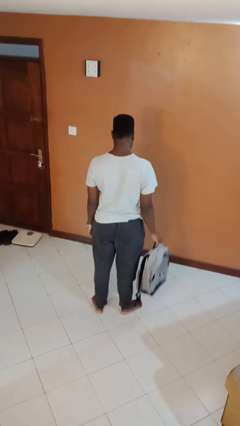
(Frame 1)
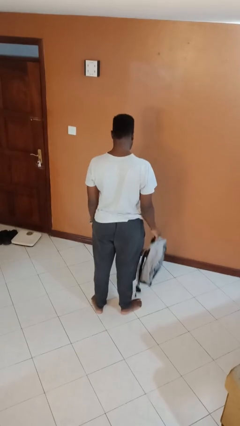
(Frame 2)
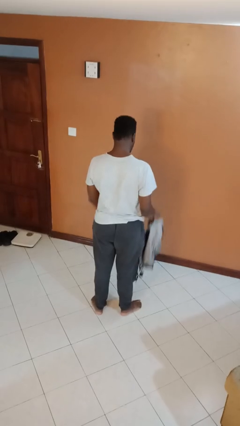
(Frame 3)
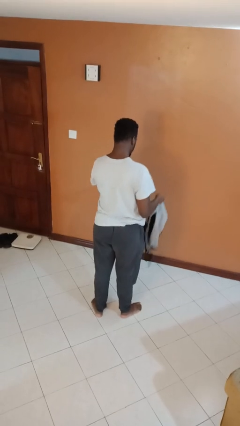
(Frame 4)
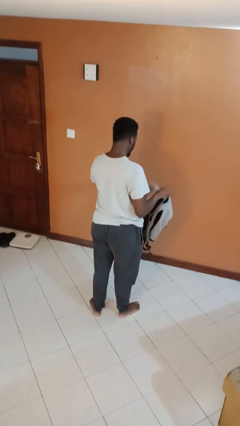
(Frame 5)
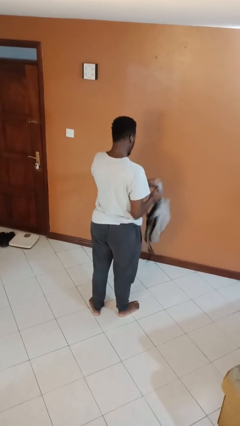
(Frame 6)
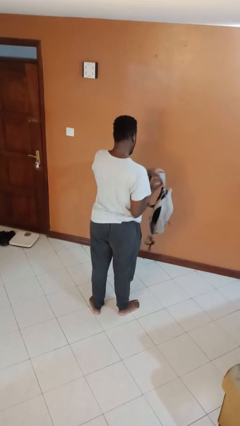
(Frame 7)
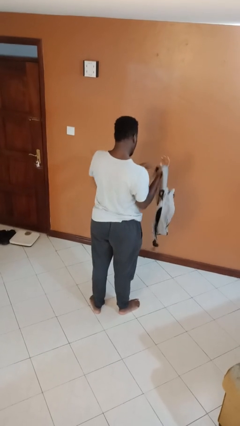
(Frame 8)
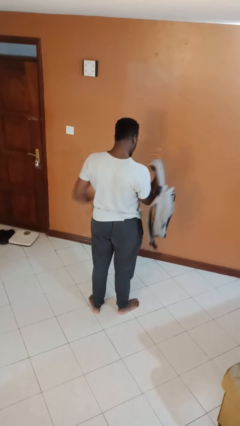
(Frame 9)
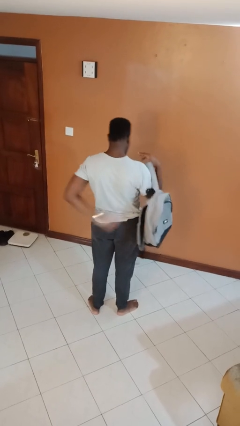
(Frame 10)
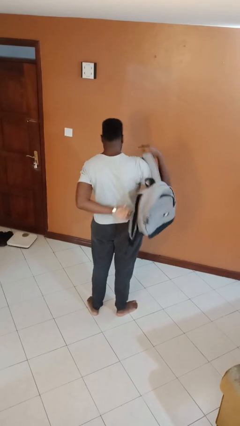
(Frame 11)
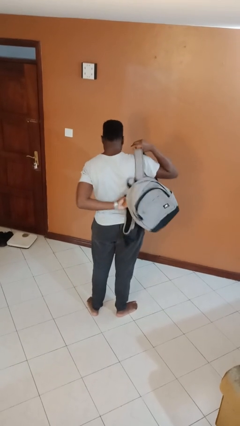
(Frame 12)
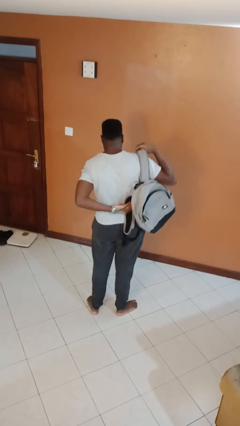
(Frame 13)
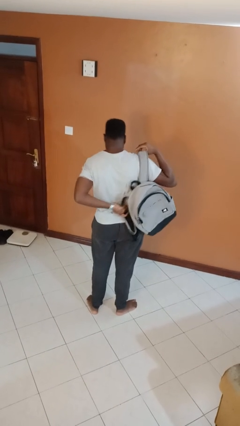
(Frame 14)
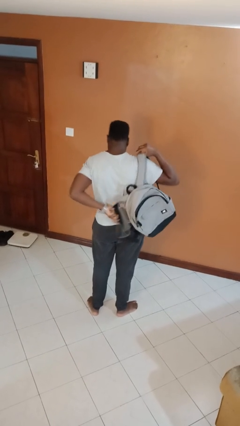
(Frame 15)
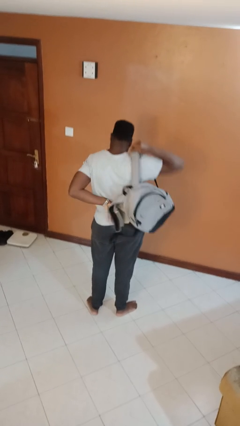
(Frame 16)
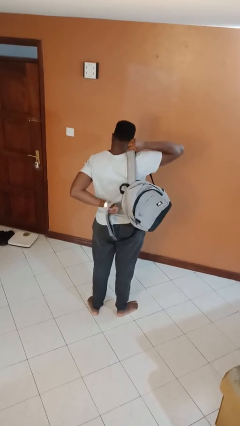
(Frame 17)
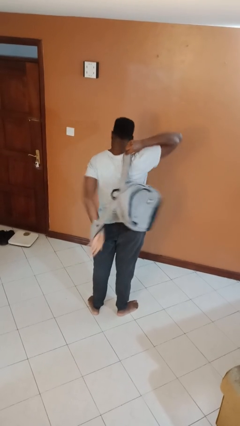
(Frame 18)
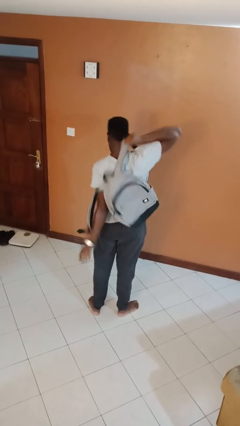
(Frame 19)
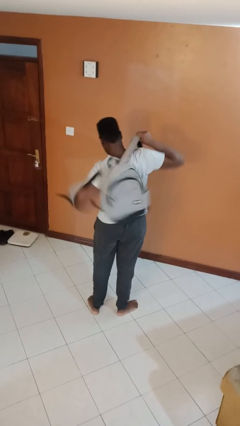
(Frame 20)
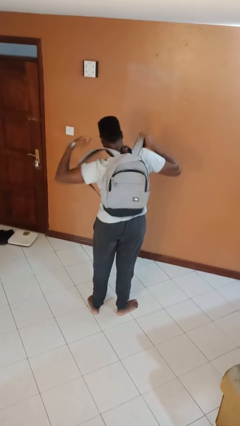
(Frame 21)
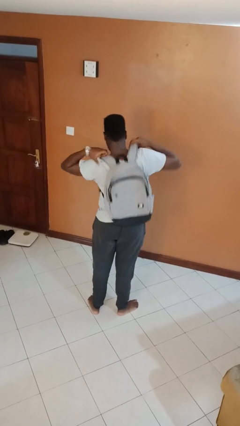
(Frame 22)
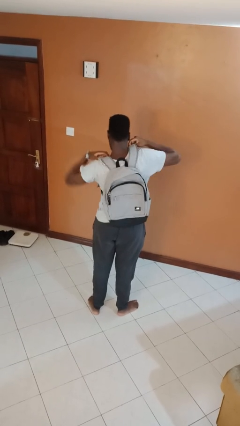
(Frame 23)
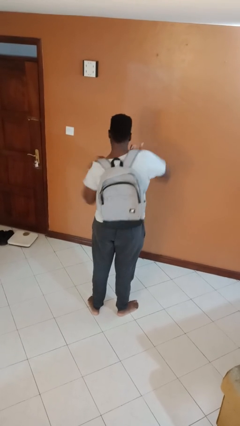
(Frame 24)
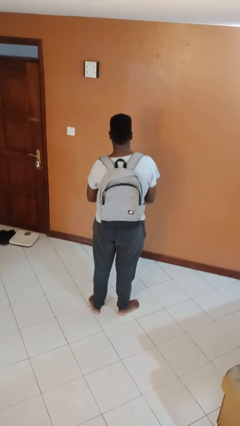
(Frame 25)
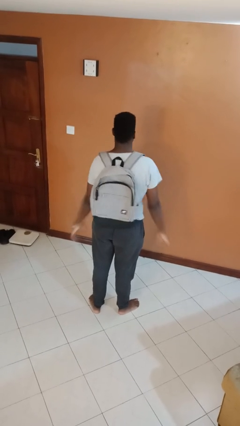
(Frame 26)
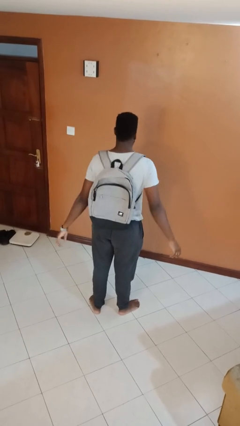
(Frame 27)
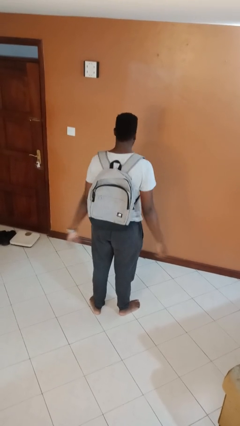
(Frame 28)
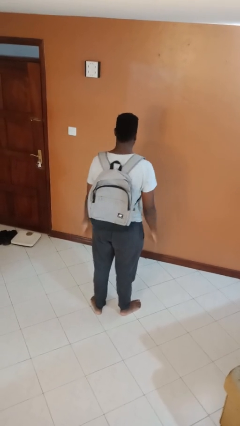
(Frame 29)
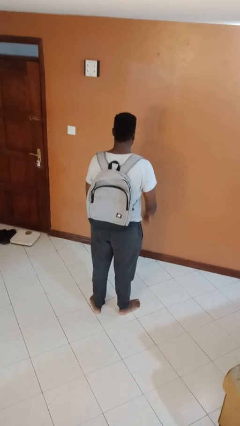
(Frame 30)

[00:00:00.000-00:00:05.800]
person puts on backpack

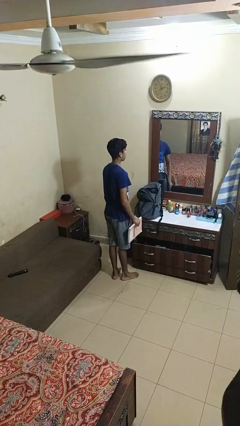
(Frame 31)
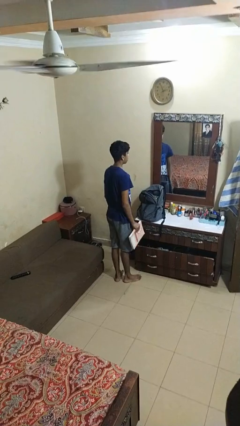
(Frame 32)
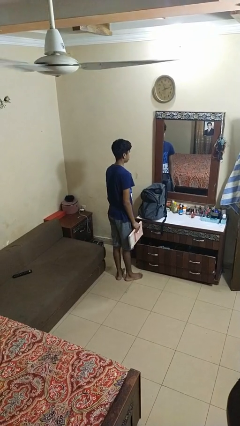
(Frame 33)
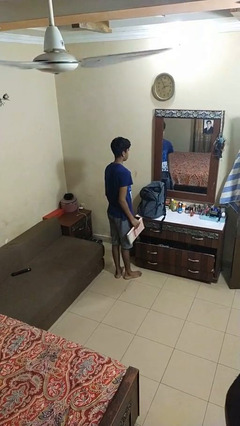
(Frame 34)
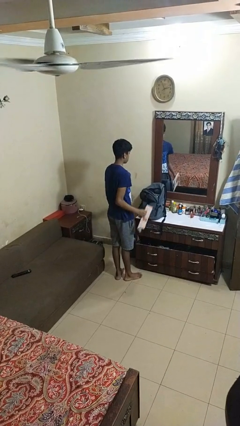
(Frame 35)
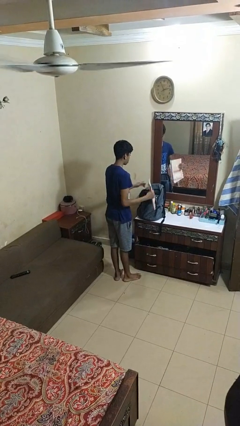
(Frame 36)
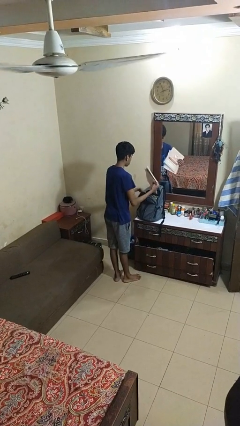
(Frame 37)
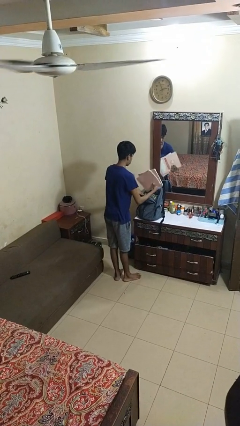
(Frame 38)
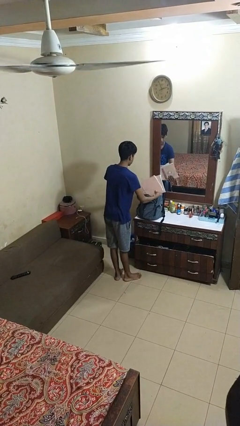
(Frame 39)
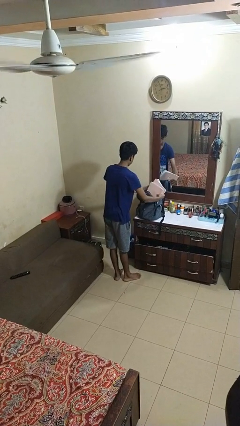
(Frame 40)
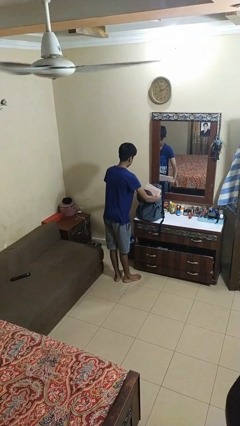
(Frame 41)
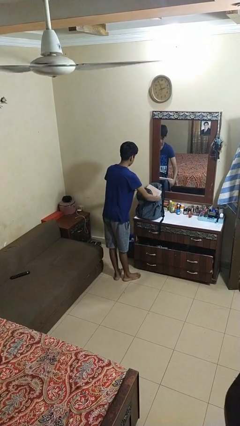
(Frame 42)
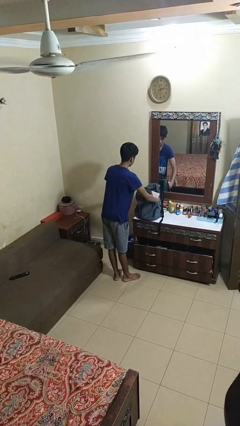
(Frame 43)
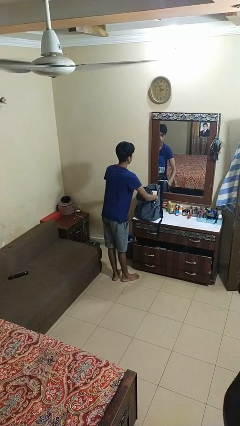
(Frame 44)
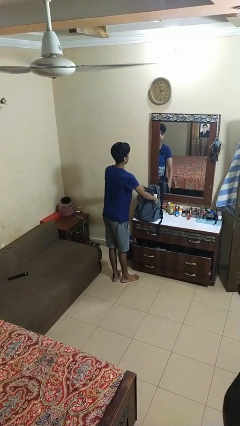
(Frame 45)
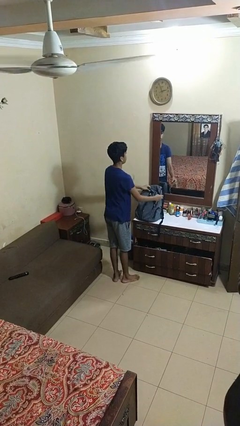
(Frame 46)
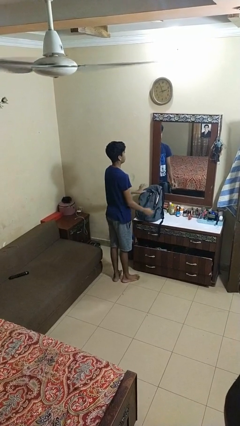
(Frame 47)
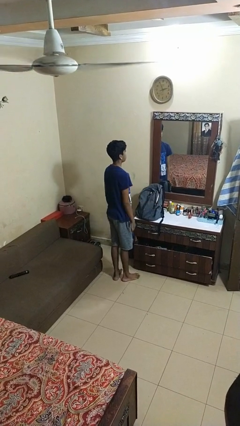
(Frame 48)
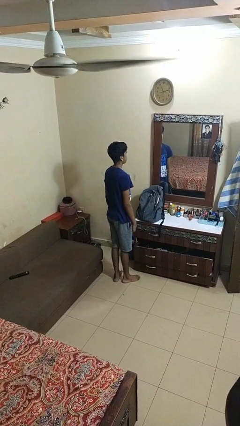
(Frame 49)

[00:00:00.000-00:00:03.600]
person puts object into bag

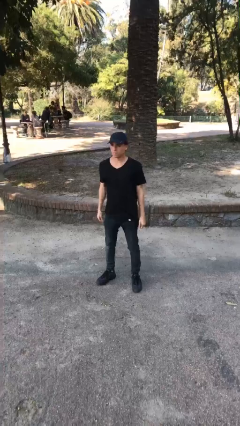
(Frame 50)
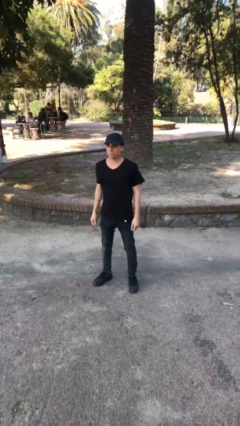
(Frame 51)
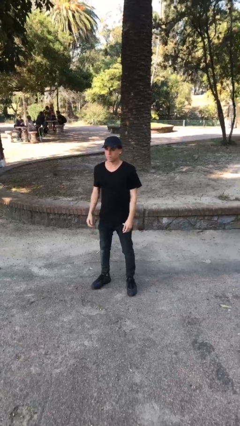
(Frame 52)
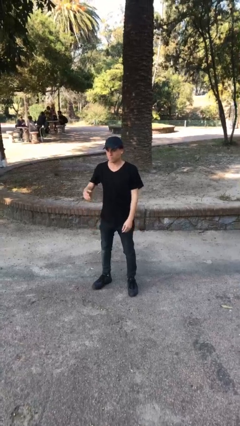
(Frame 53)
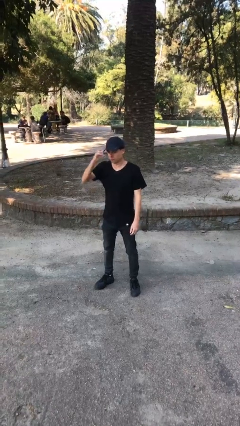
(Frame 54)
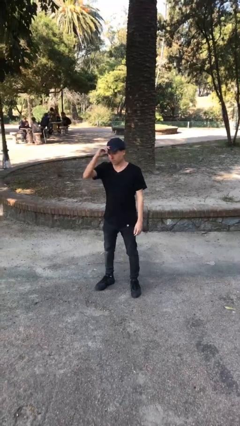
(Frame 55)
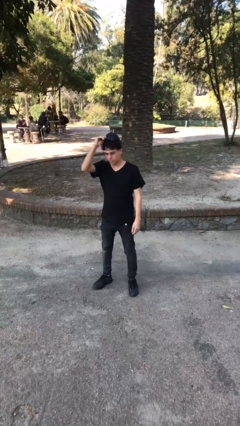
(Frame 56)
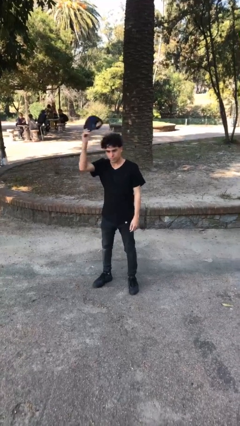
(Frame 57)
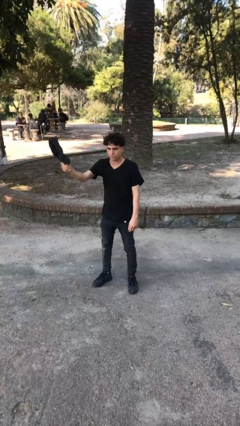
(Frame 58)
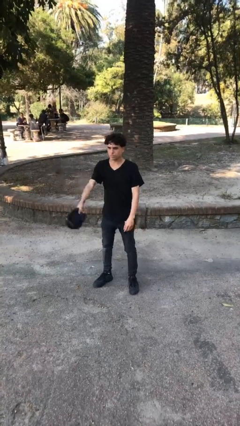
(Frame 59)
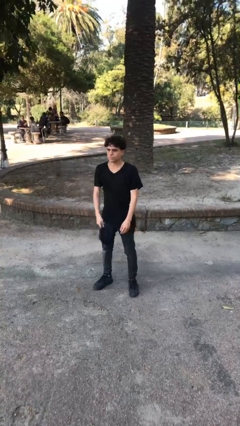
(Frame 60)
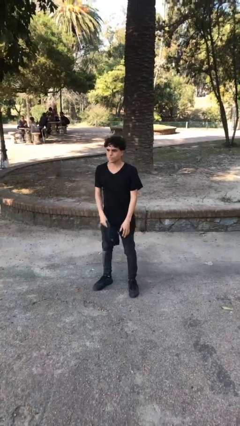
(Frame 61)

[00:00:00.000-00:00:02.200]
person takes off hat

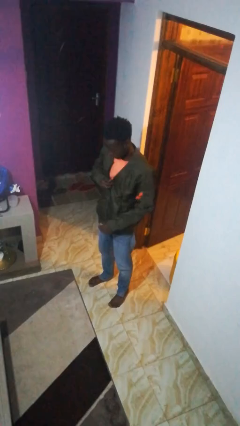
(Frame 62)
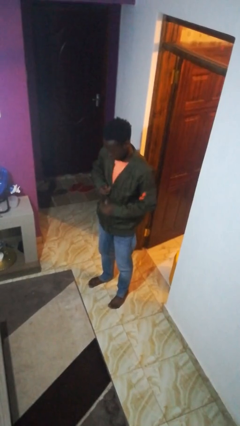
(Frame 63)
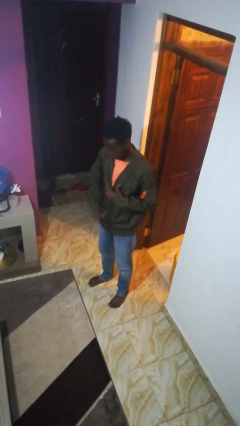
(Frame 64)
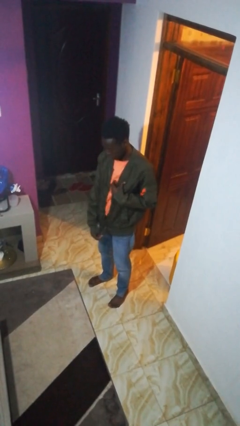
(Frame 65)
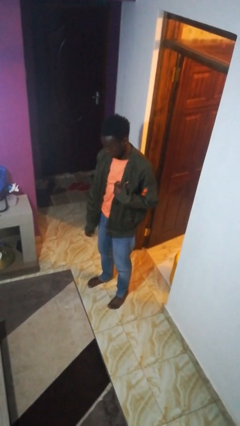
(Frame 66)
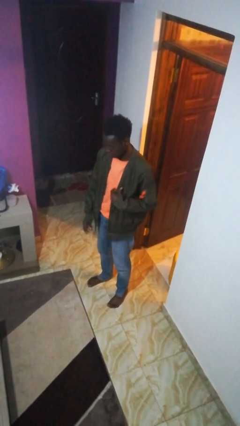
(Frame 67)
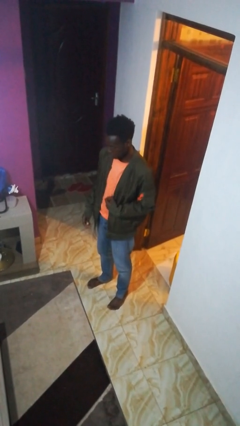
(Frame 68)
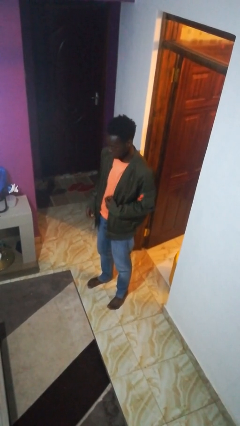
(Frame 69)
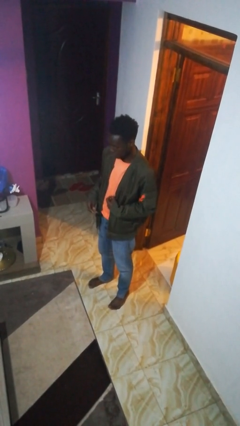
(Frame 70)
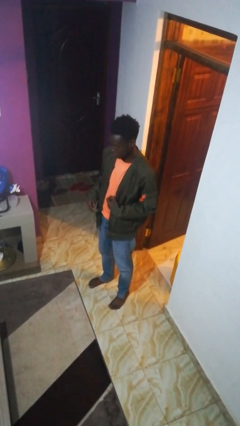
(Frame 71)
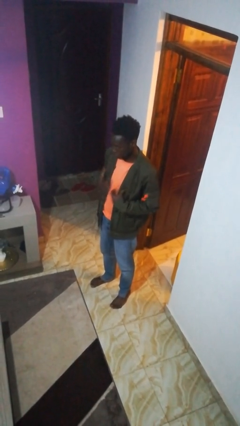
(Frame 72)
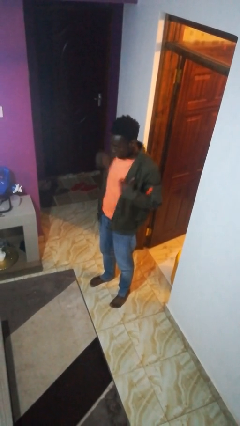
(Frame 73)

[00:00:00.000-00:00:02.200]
person unzips jacket

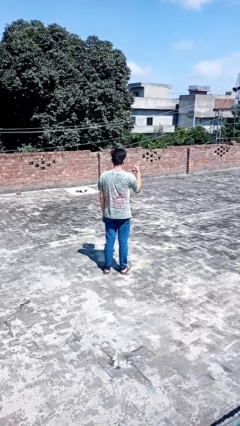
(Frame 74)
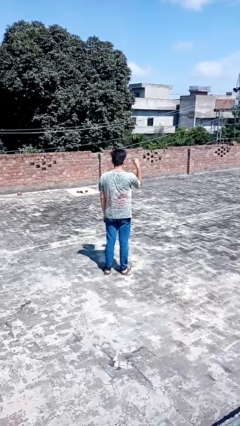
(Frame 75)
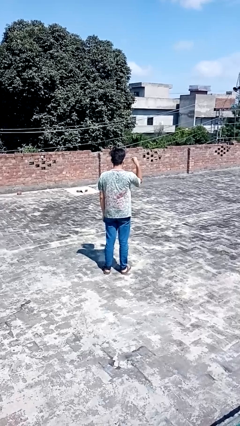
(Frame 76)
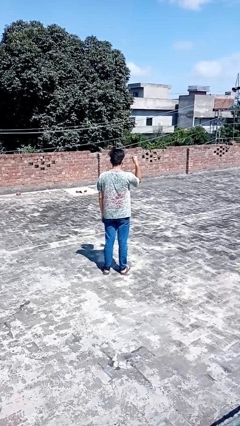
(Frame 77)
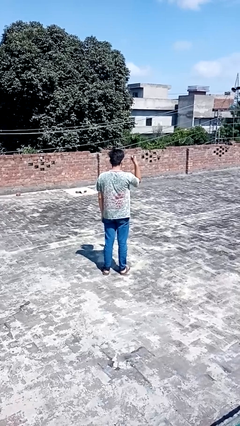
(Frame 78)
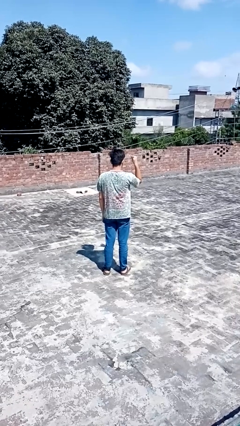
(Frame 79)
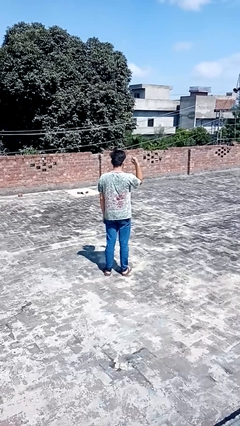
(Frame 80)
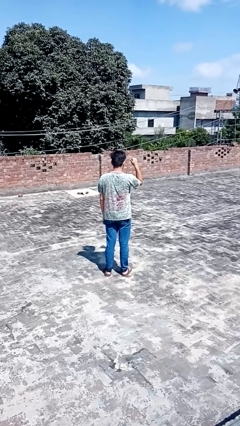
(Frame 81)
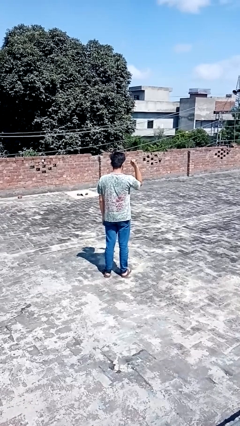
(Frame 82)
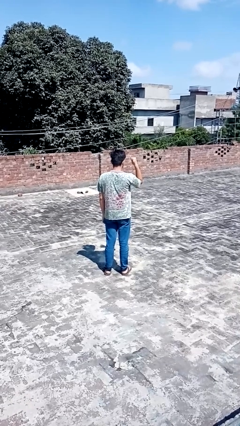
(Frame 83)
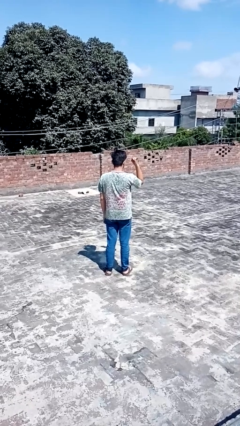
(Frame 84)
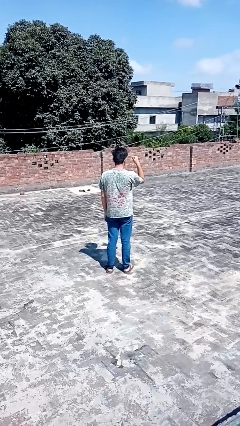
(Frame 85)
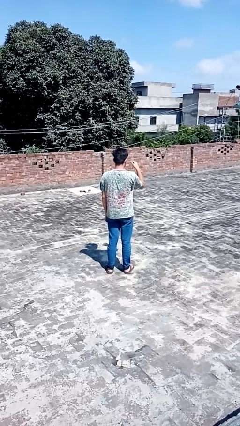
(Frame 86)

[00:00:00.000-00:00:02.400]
person gestures hang loose

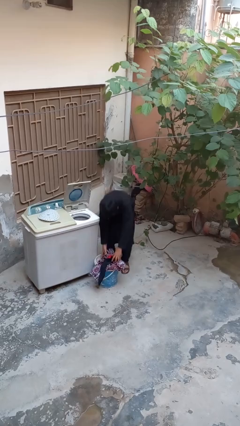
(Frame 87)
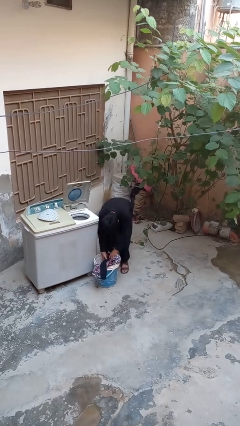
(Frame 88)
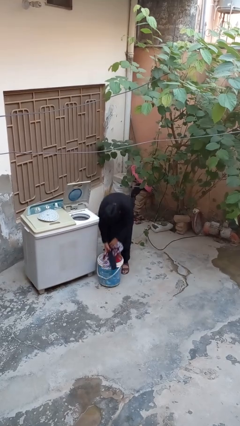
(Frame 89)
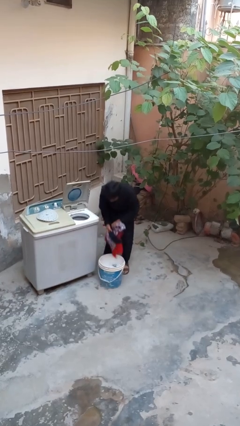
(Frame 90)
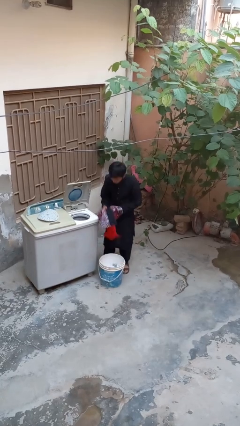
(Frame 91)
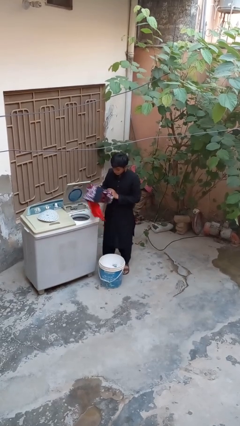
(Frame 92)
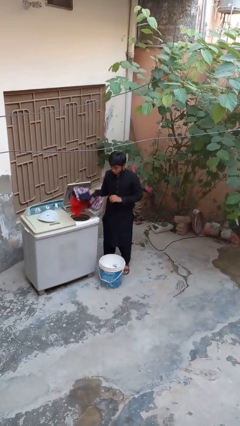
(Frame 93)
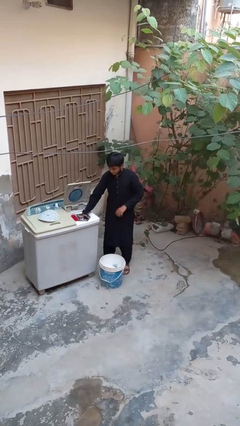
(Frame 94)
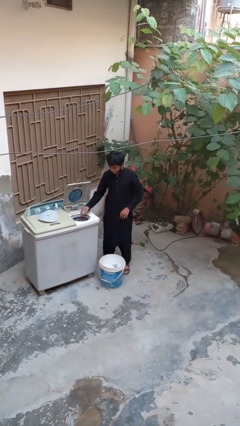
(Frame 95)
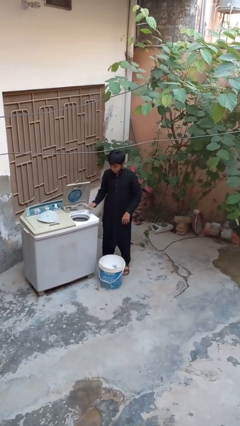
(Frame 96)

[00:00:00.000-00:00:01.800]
person loads dryer
